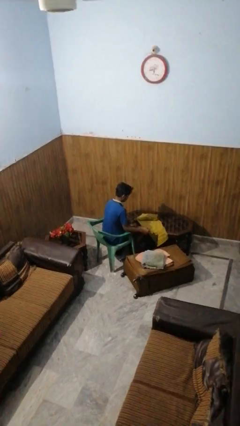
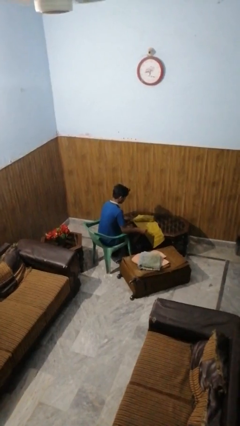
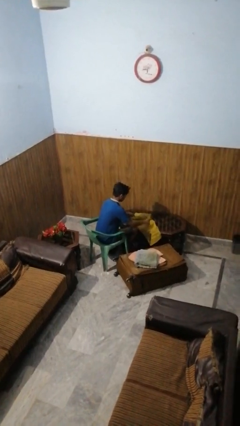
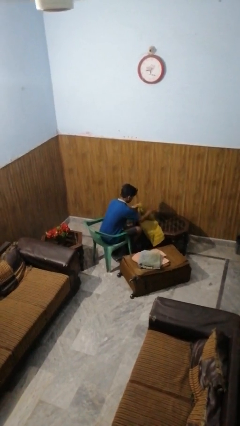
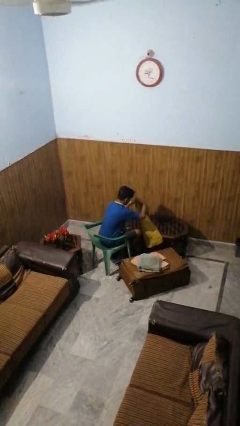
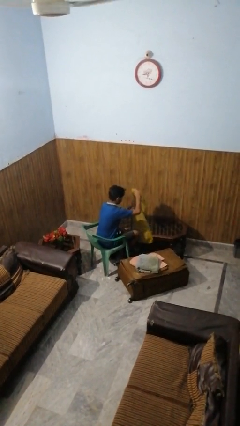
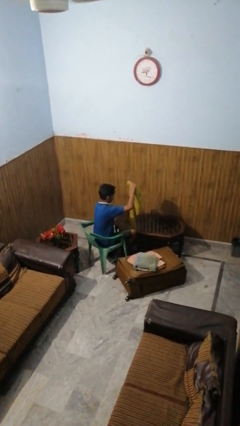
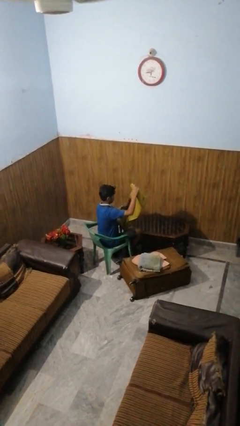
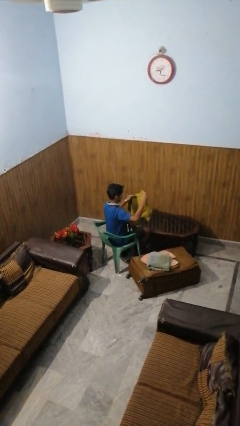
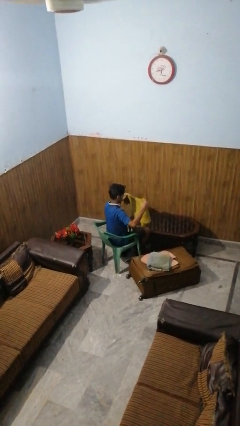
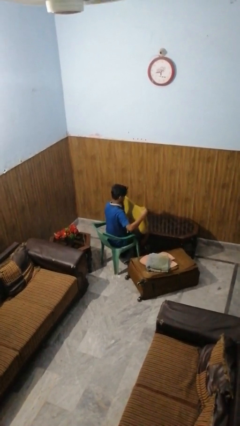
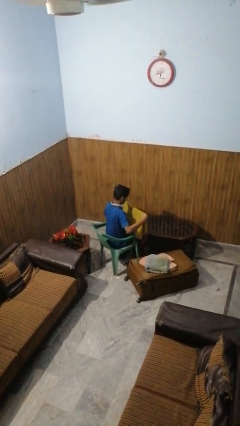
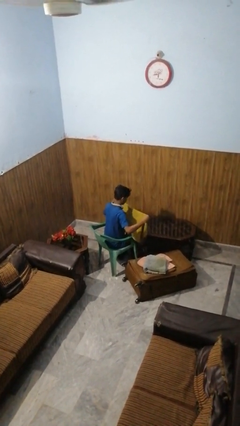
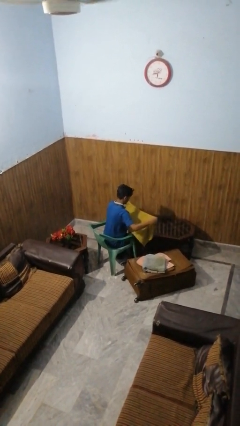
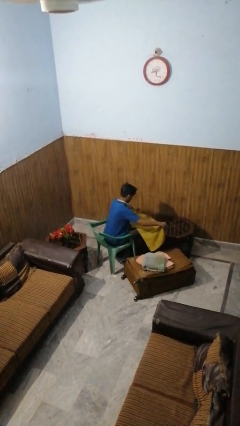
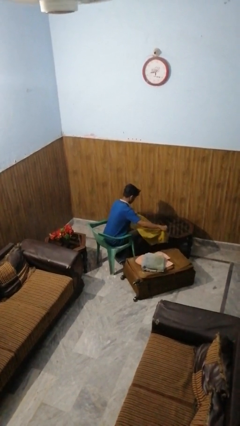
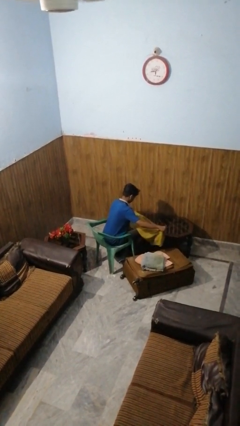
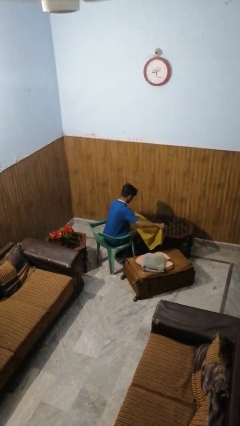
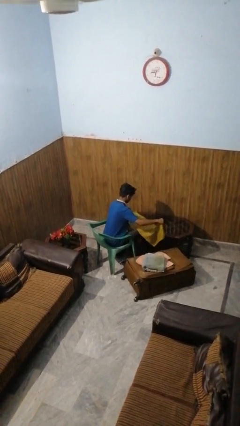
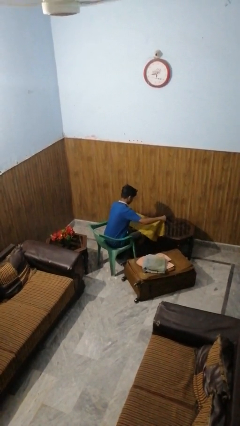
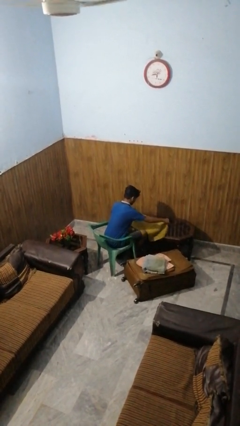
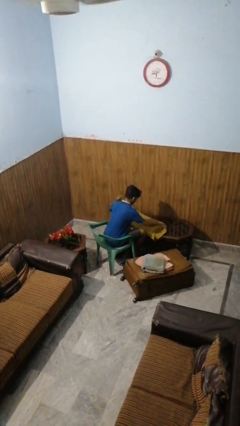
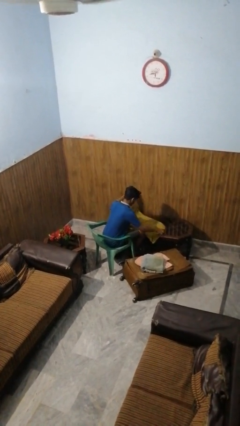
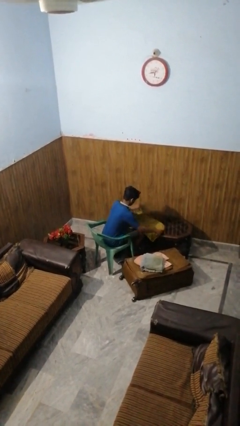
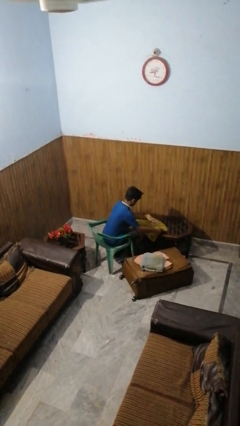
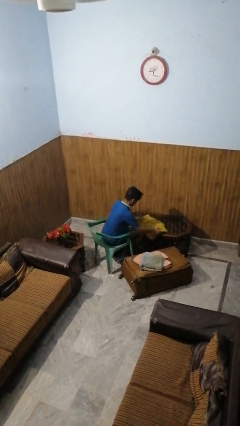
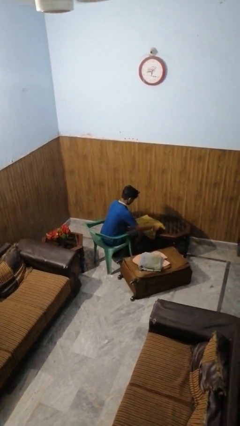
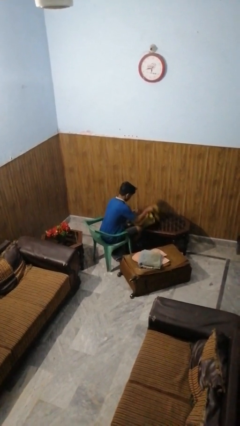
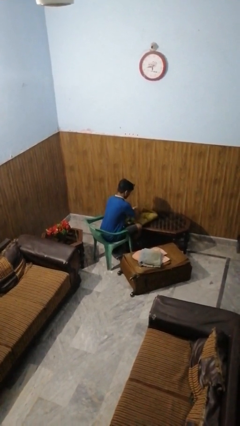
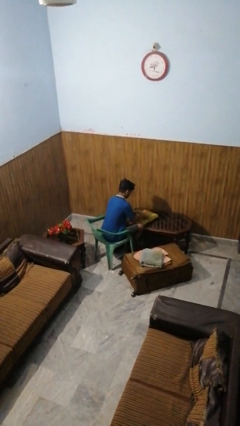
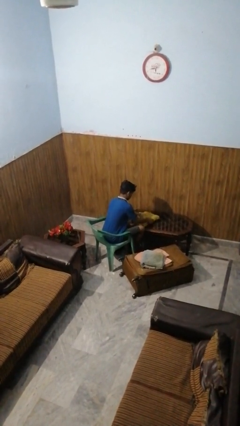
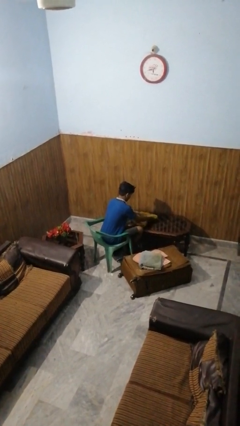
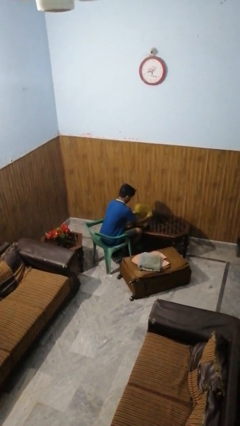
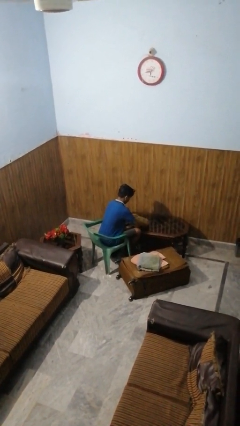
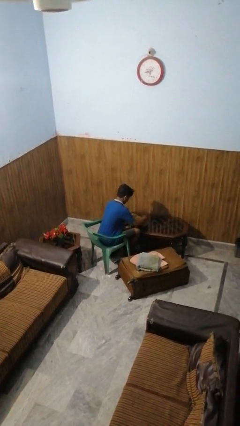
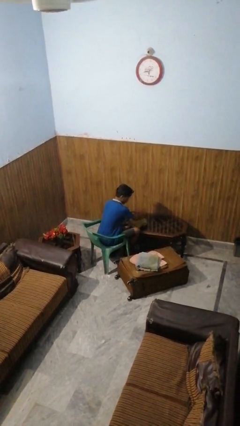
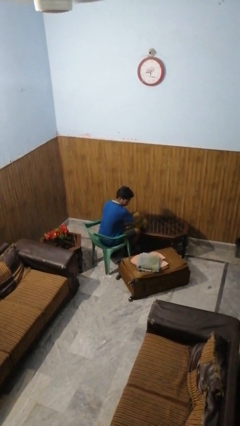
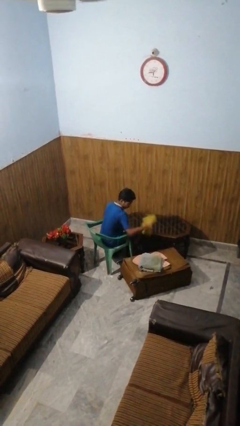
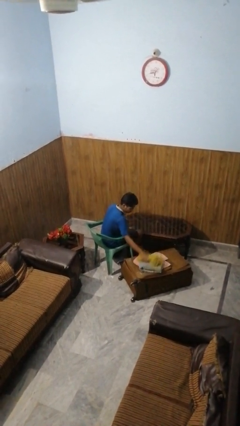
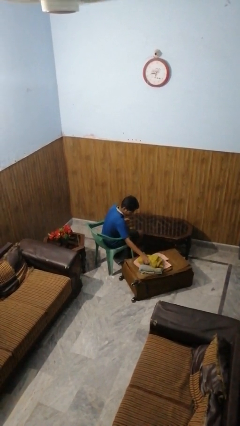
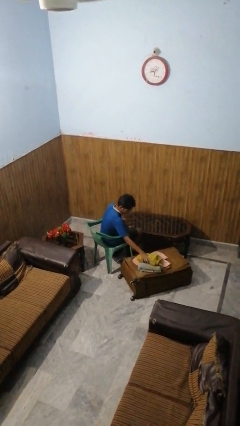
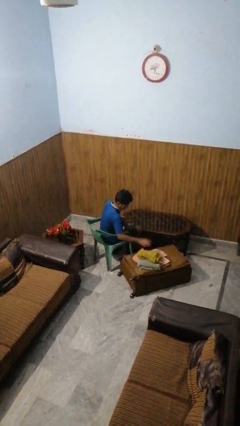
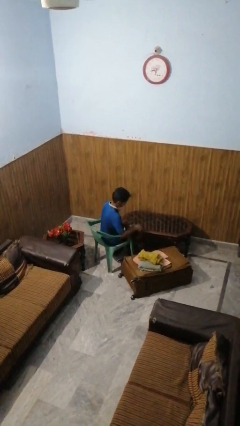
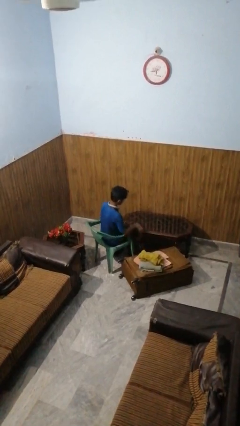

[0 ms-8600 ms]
person folds towel

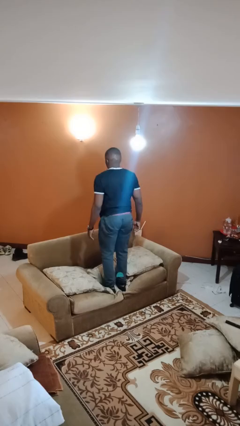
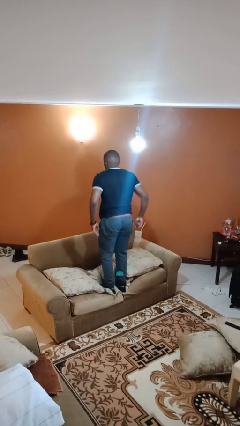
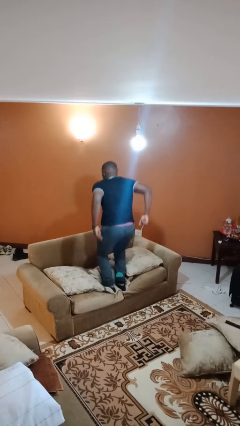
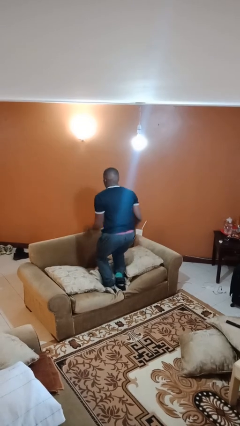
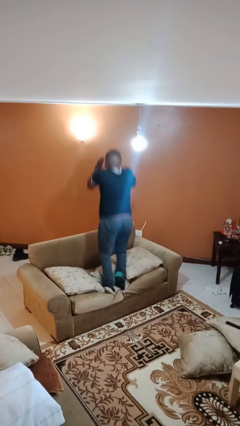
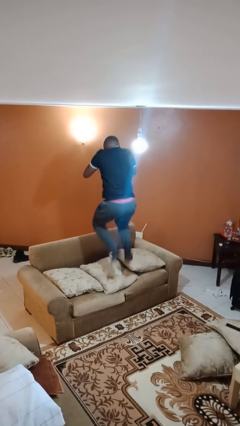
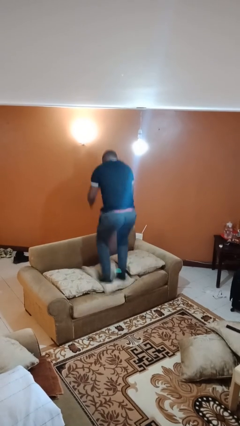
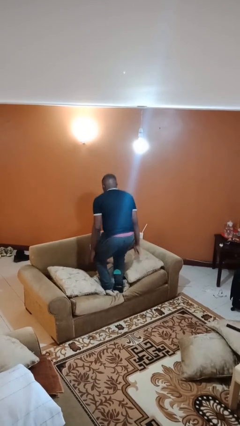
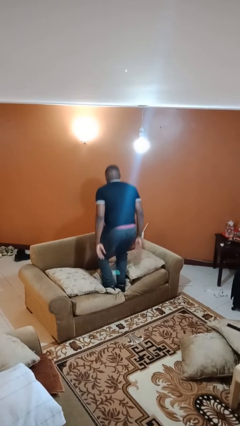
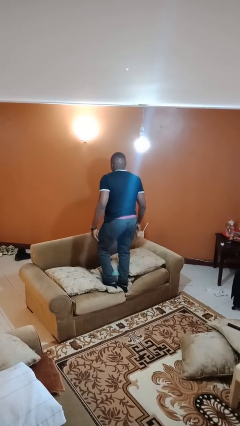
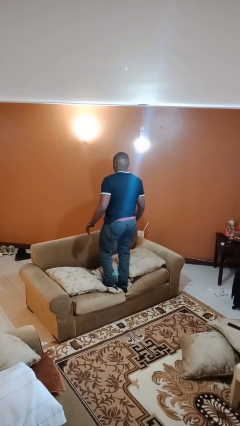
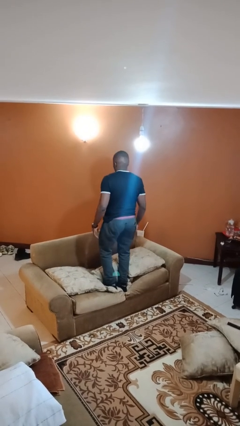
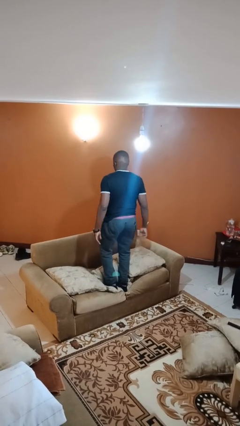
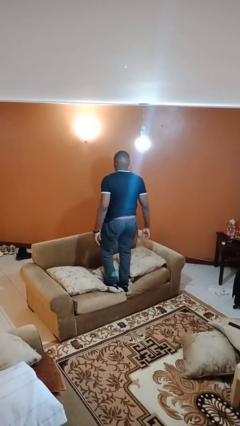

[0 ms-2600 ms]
person jumps on couch

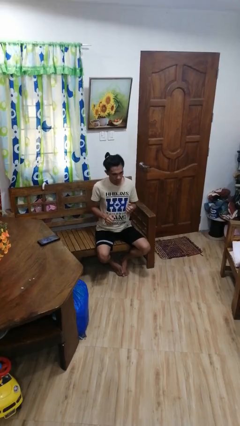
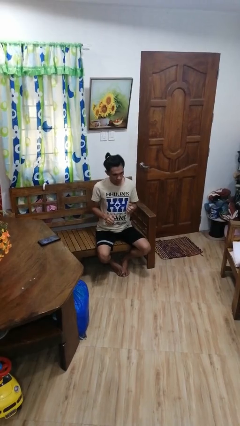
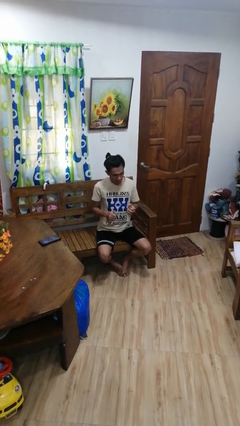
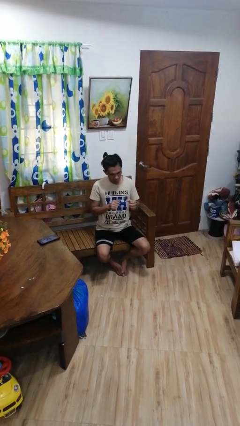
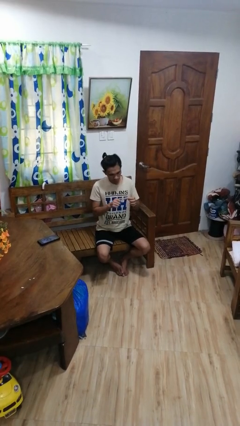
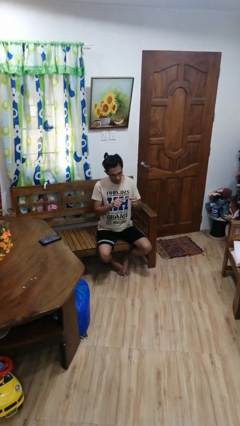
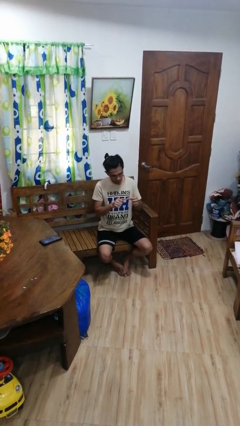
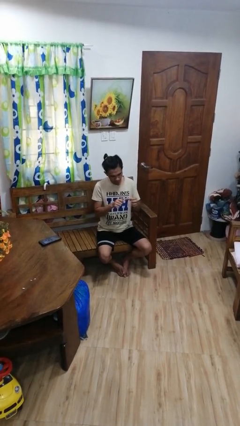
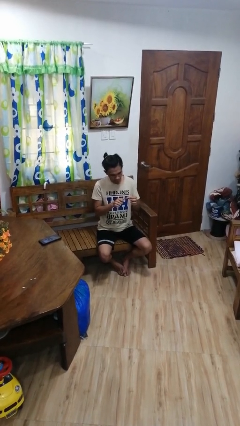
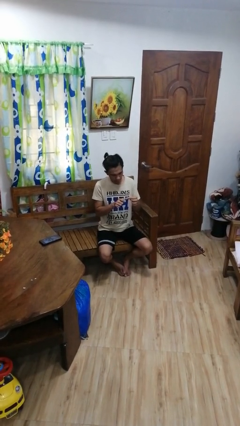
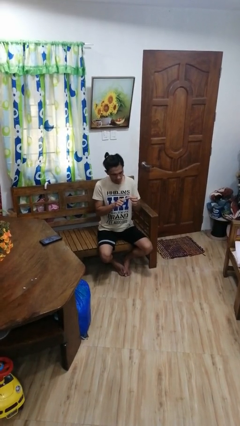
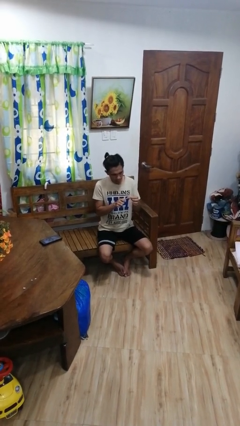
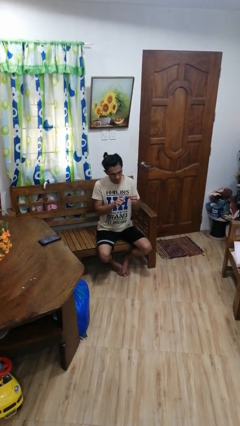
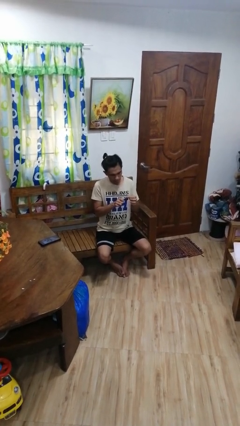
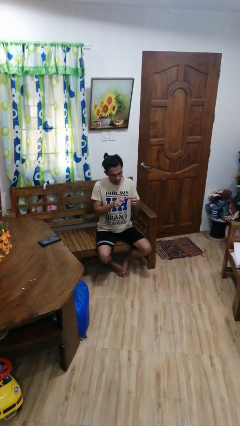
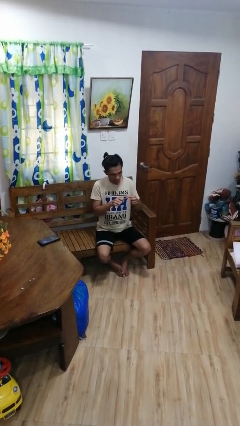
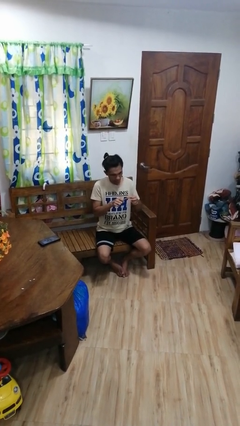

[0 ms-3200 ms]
person files fingernails

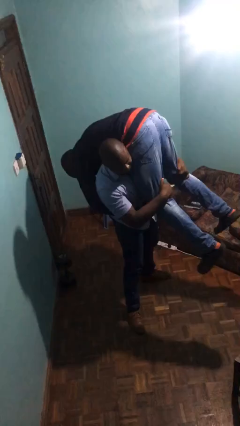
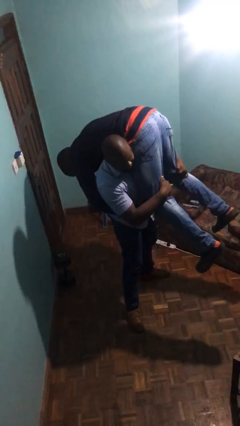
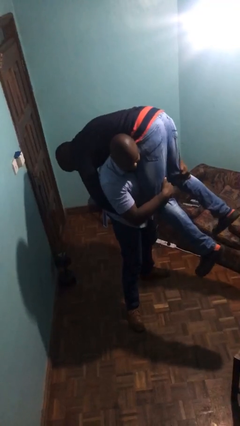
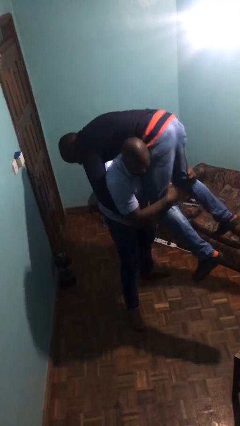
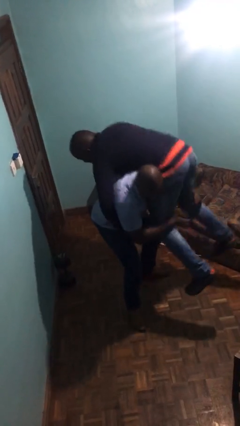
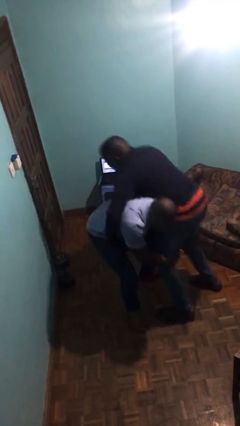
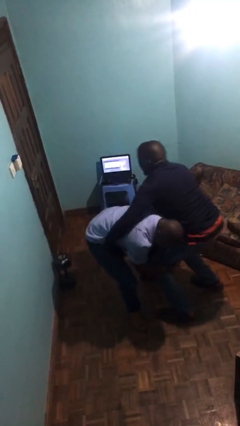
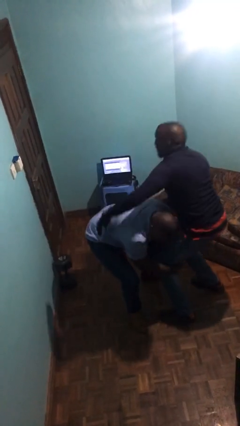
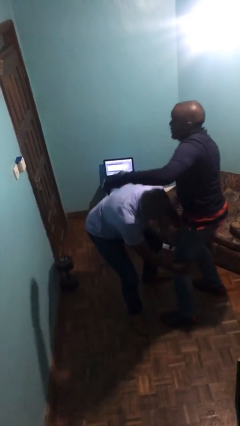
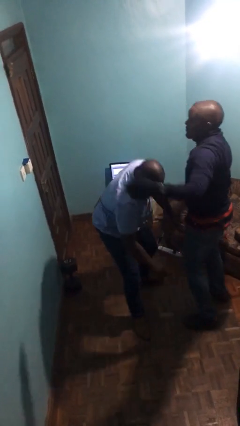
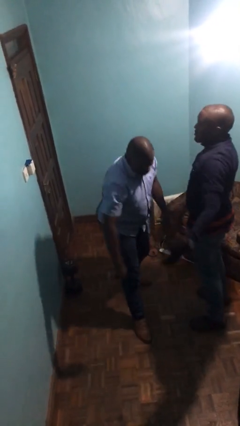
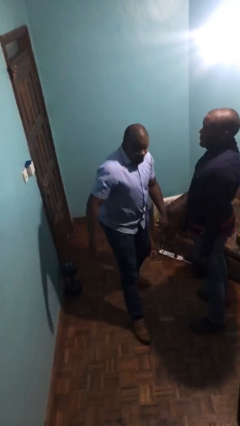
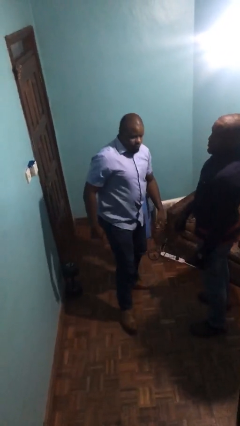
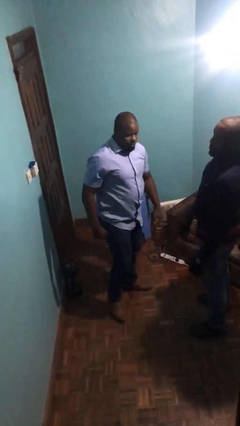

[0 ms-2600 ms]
person puts down person

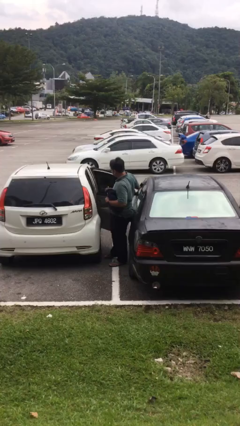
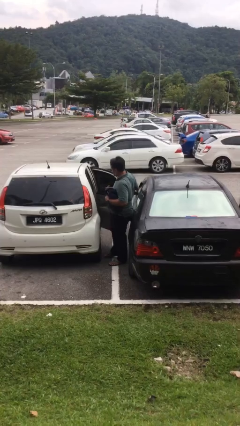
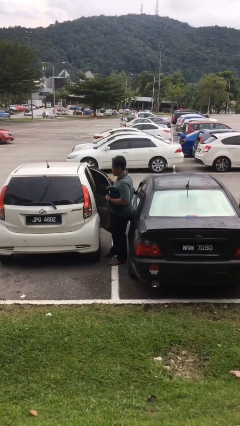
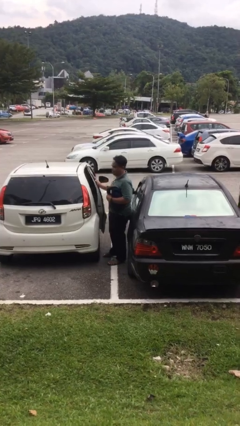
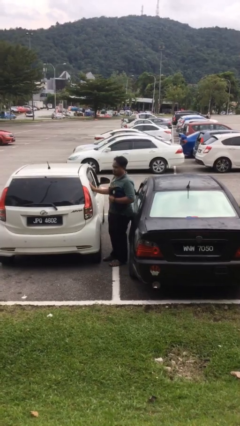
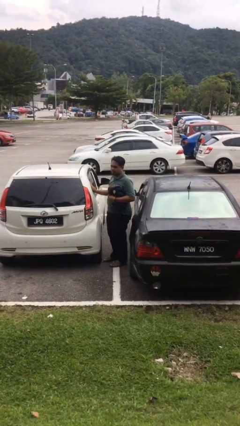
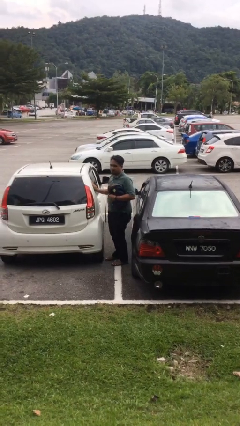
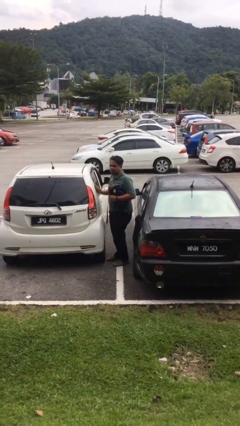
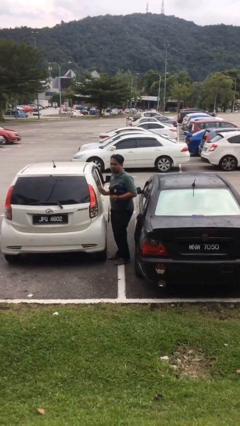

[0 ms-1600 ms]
person closes car door
